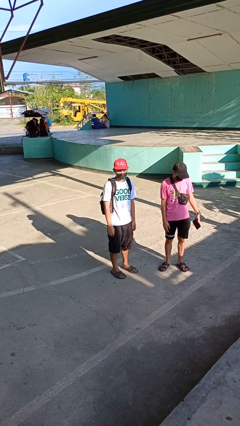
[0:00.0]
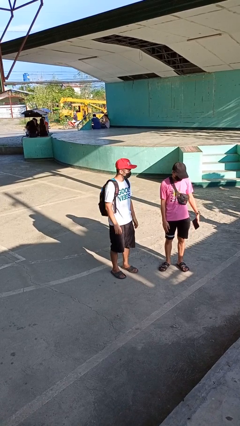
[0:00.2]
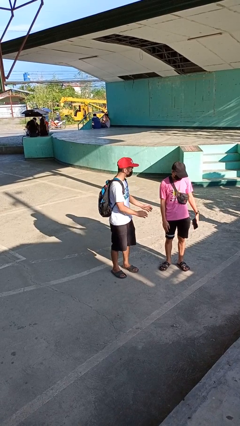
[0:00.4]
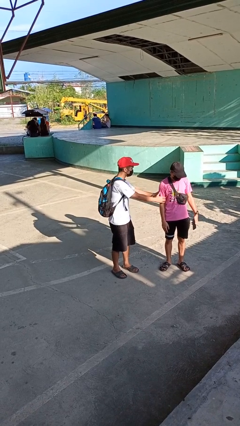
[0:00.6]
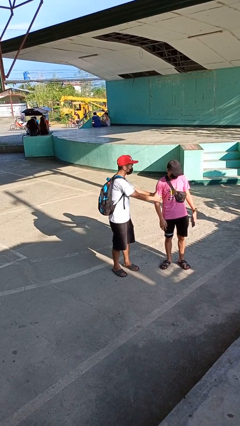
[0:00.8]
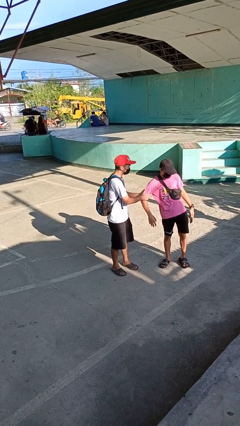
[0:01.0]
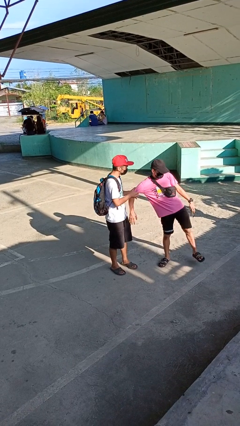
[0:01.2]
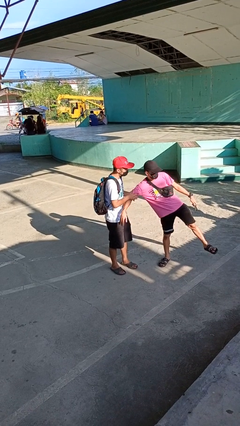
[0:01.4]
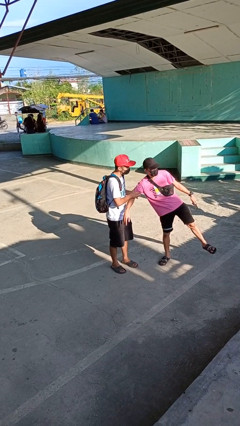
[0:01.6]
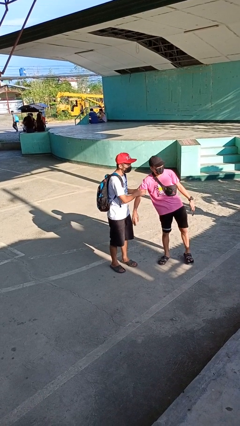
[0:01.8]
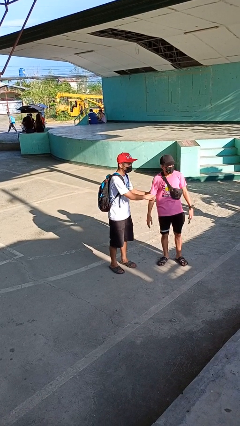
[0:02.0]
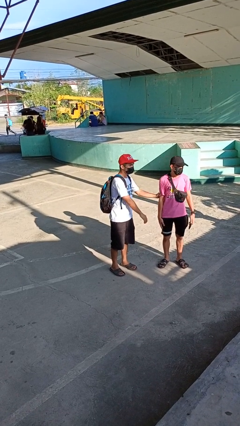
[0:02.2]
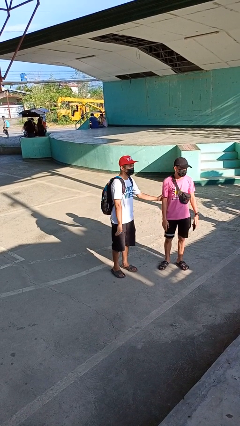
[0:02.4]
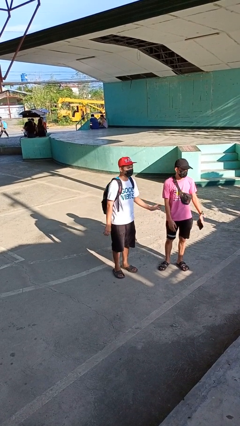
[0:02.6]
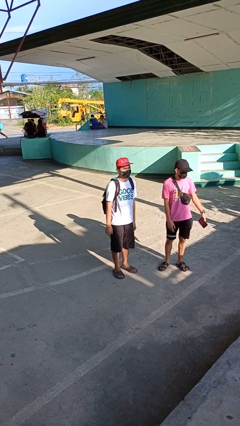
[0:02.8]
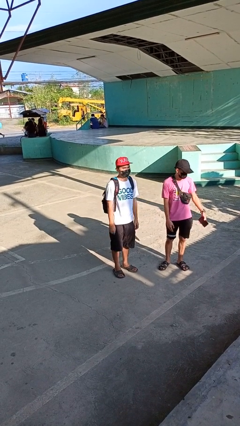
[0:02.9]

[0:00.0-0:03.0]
person grabs person by bicep

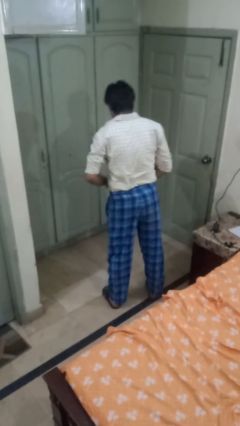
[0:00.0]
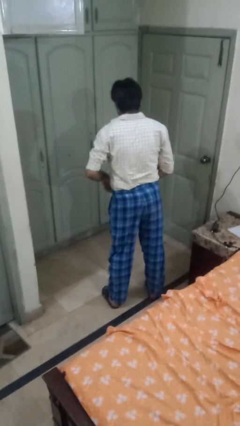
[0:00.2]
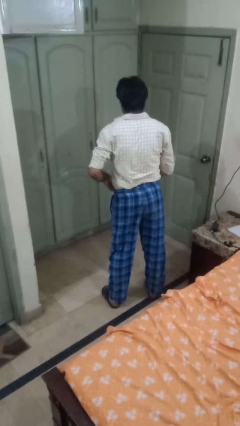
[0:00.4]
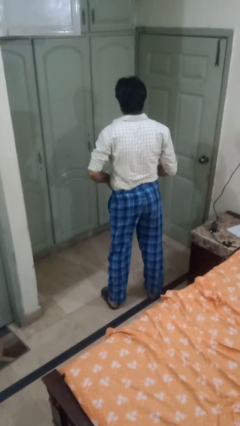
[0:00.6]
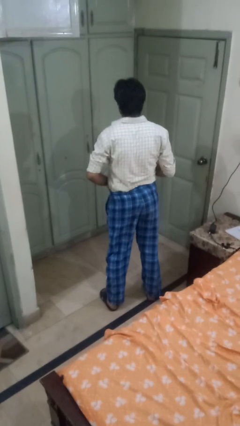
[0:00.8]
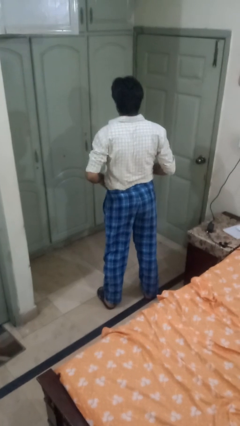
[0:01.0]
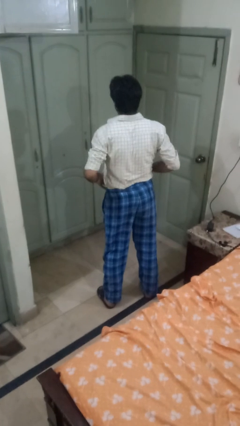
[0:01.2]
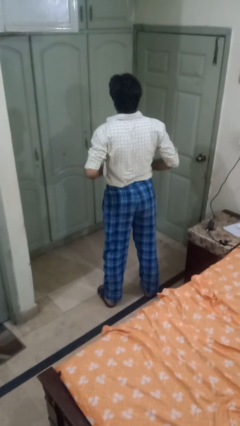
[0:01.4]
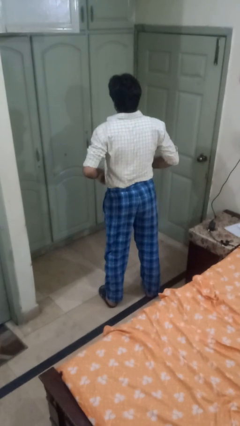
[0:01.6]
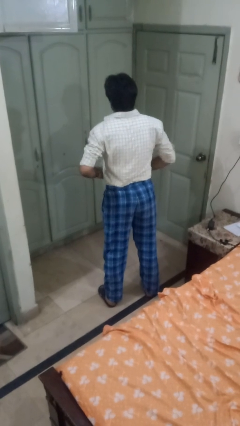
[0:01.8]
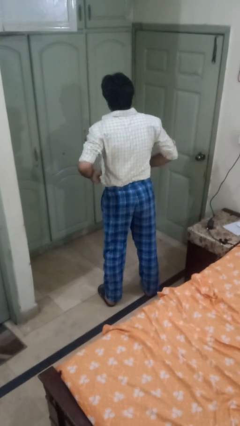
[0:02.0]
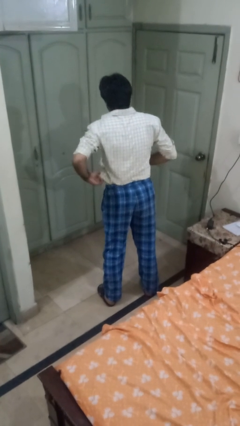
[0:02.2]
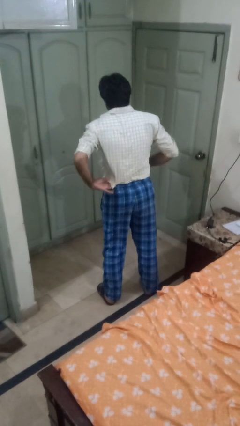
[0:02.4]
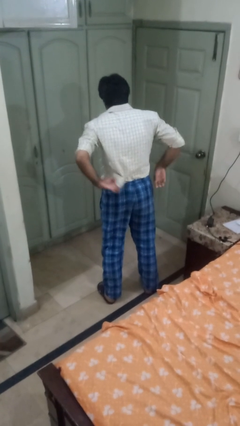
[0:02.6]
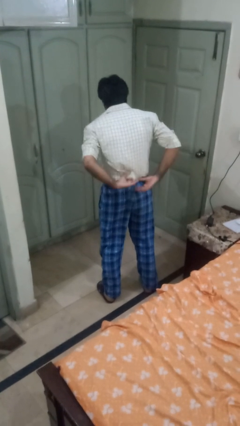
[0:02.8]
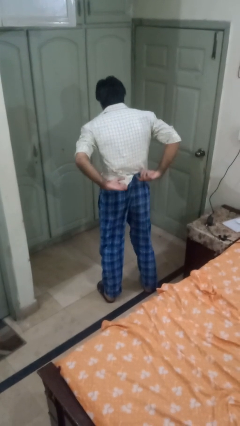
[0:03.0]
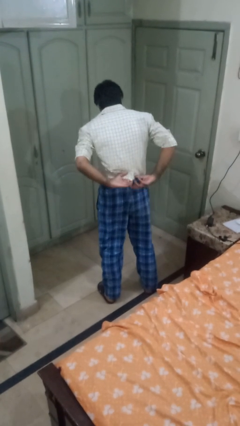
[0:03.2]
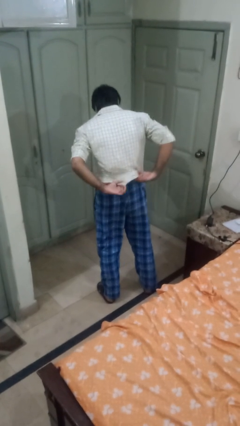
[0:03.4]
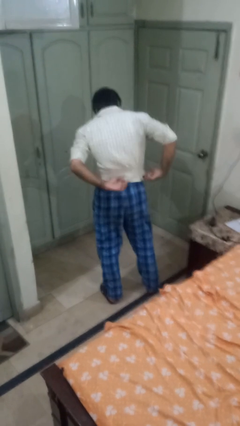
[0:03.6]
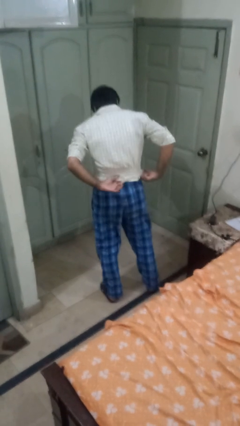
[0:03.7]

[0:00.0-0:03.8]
person untucks shirt

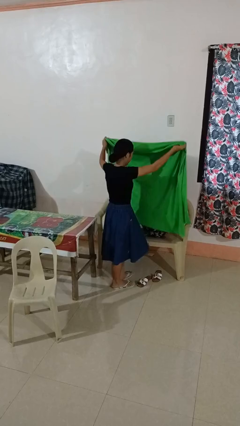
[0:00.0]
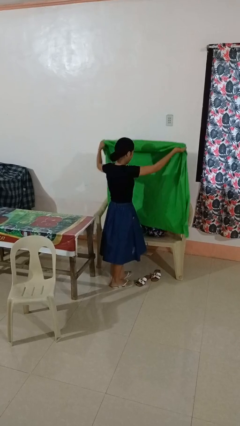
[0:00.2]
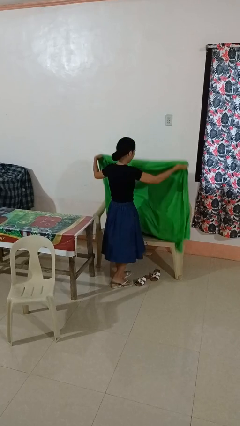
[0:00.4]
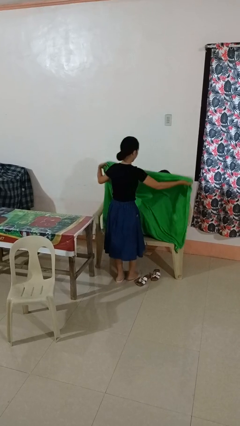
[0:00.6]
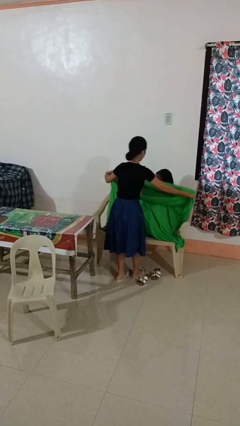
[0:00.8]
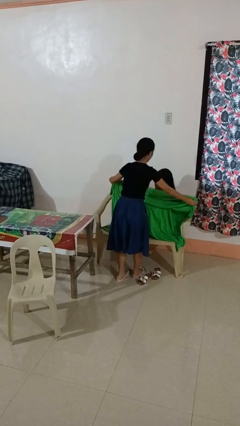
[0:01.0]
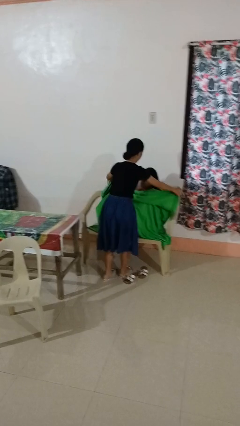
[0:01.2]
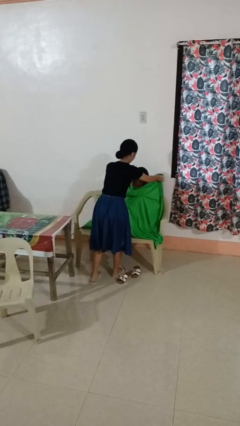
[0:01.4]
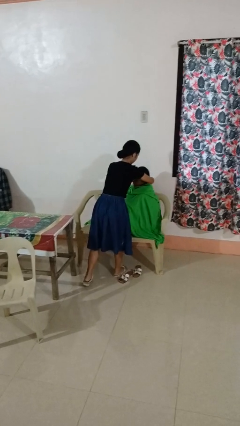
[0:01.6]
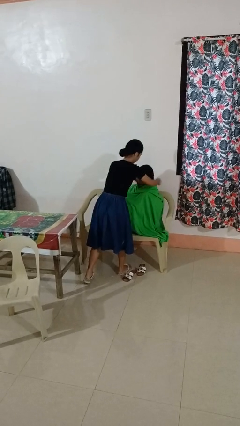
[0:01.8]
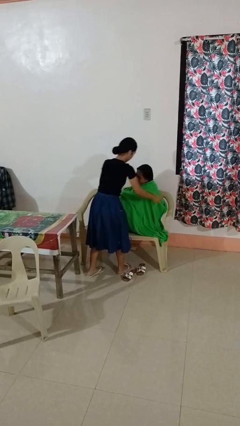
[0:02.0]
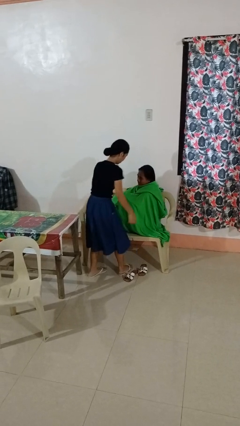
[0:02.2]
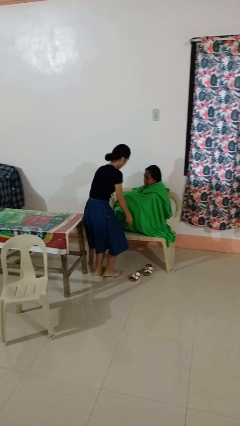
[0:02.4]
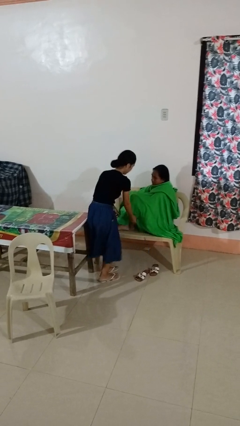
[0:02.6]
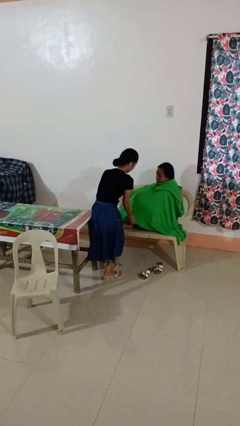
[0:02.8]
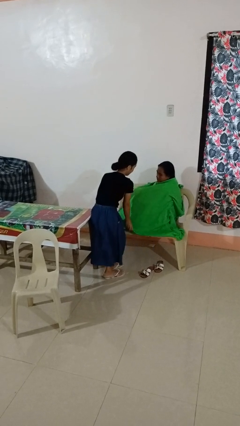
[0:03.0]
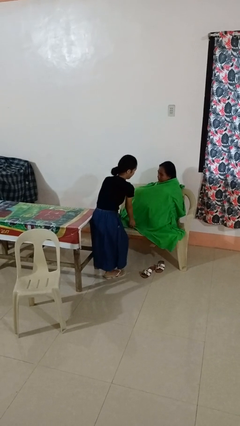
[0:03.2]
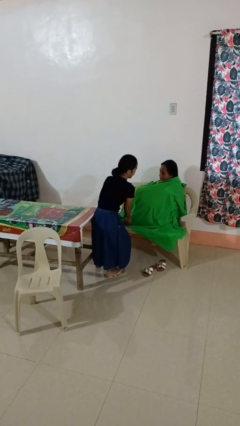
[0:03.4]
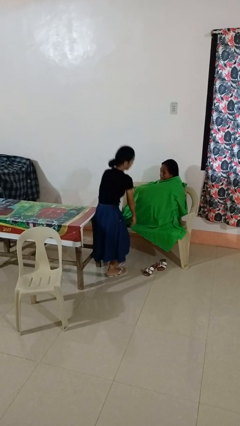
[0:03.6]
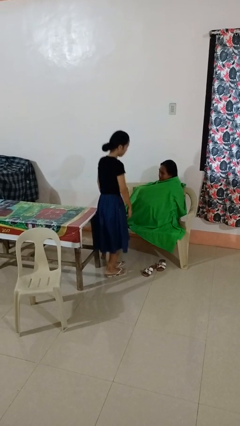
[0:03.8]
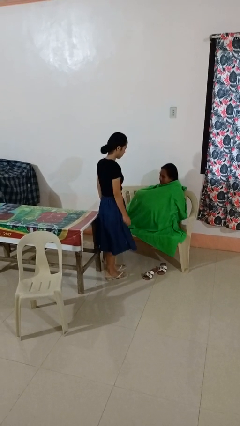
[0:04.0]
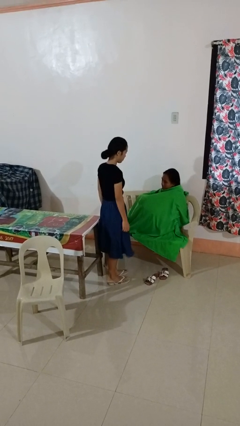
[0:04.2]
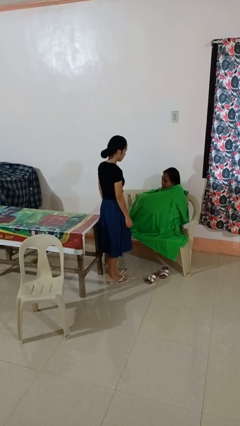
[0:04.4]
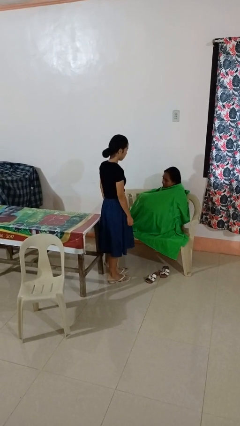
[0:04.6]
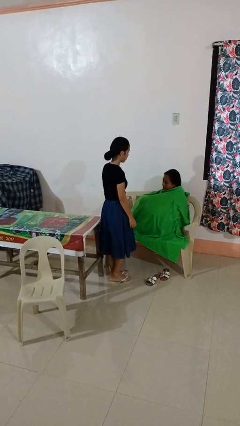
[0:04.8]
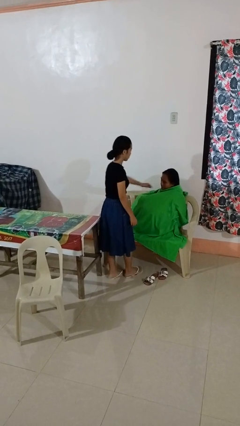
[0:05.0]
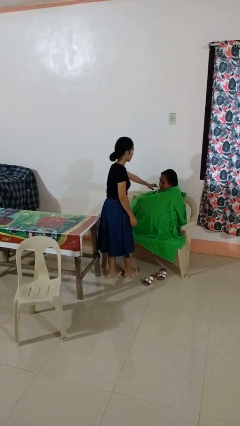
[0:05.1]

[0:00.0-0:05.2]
person covers friend with blanket

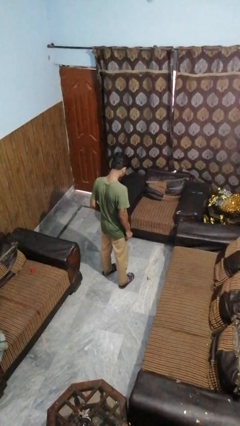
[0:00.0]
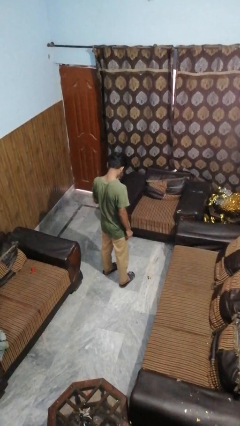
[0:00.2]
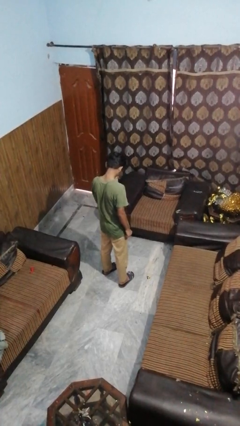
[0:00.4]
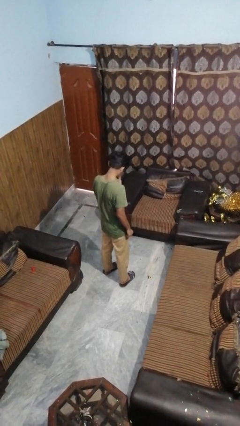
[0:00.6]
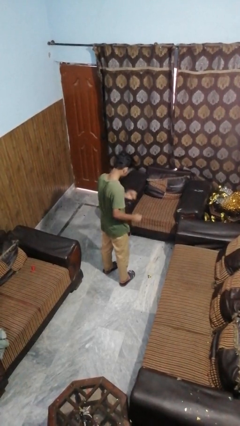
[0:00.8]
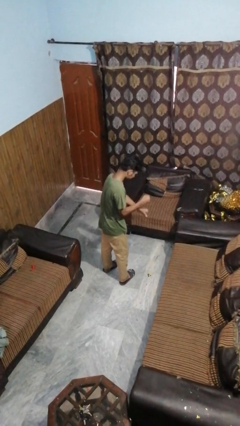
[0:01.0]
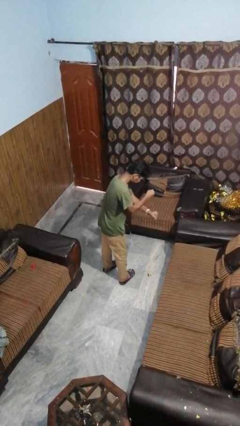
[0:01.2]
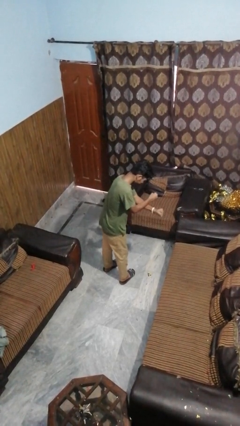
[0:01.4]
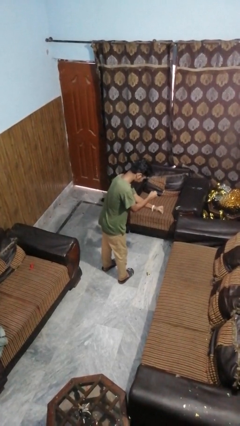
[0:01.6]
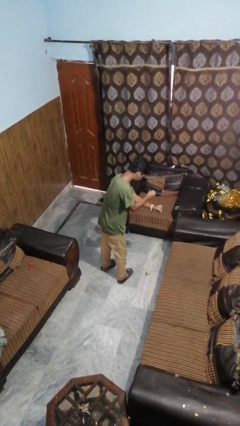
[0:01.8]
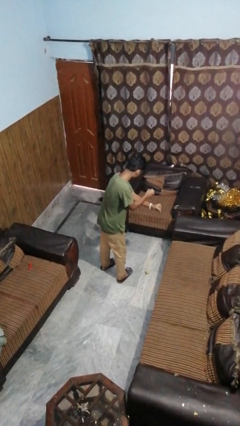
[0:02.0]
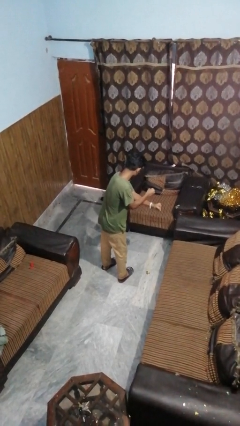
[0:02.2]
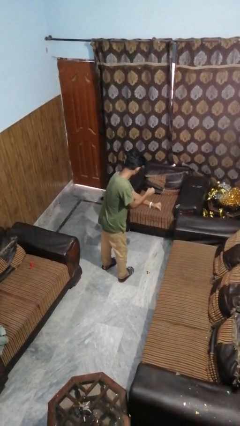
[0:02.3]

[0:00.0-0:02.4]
person gestures arms x

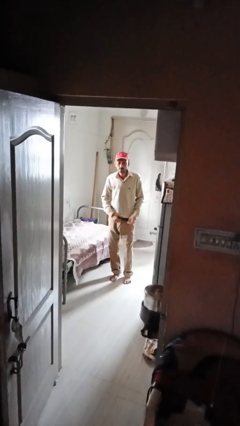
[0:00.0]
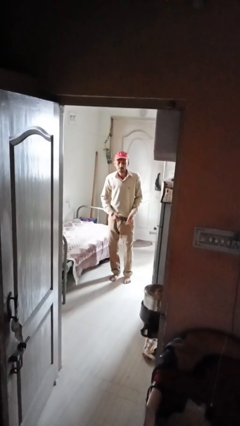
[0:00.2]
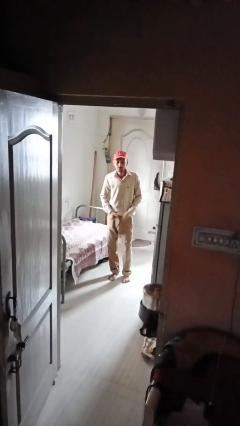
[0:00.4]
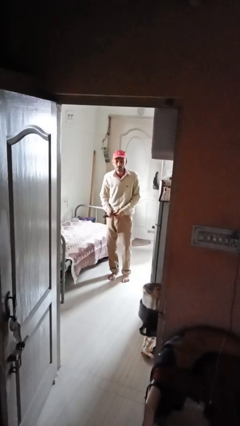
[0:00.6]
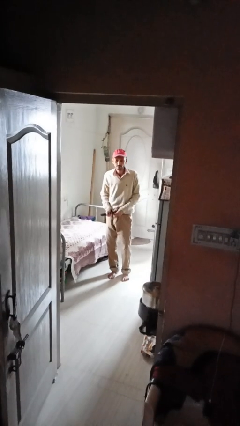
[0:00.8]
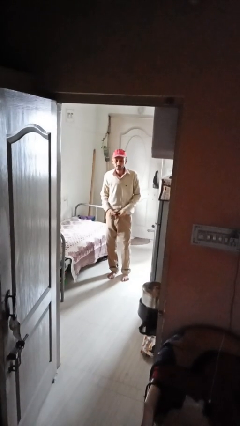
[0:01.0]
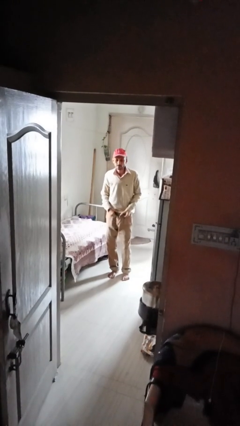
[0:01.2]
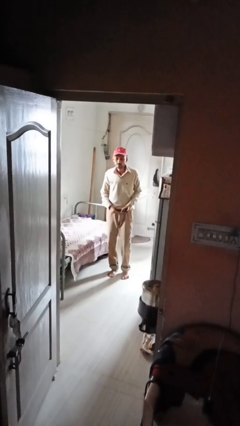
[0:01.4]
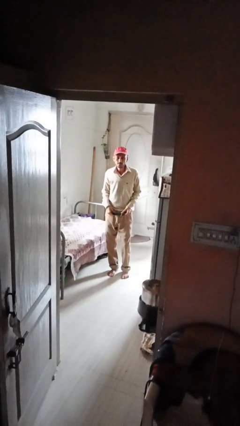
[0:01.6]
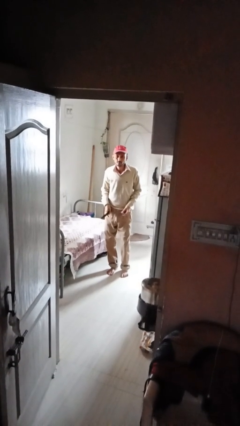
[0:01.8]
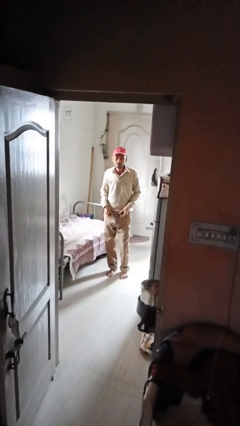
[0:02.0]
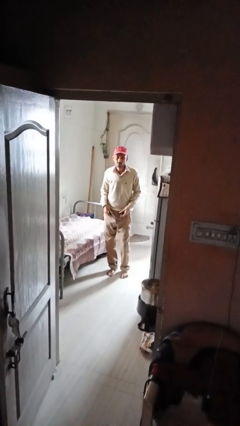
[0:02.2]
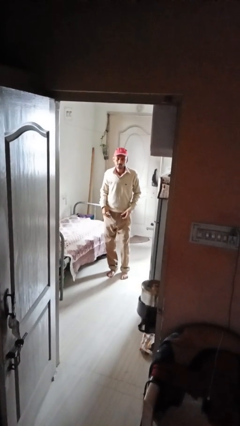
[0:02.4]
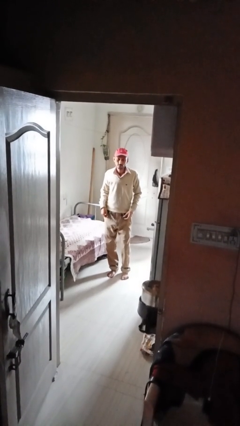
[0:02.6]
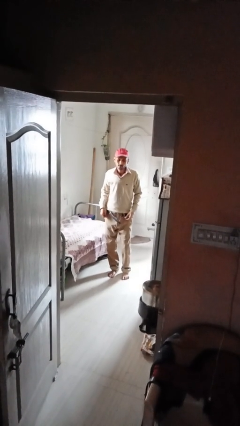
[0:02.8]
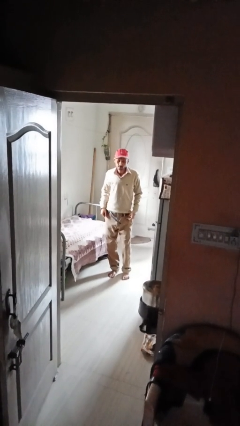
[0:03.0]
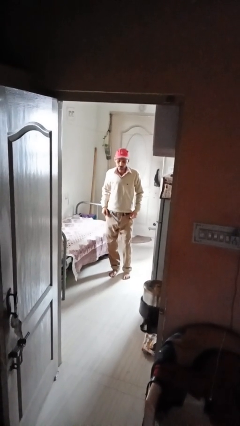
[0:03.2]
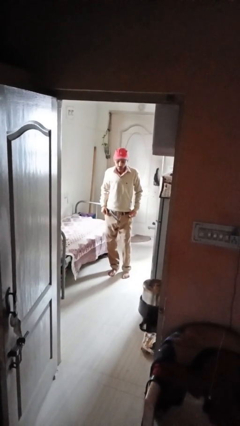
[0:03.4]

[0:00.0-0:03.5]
person takes off belt
